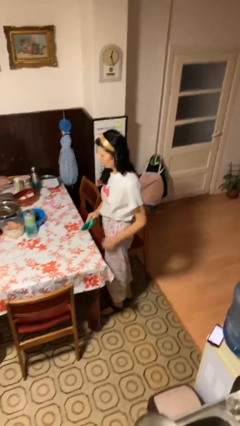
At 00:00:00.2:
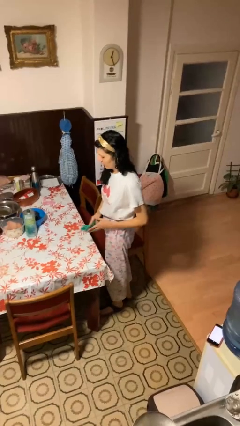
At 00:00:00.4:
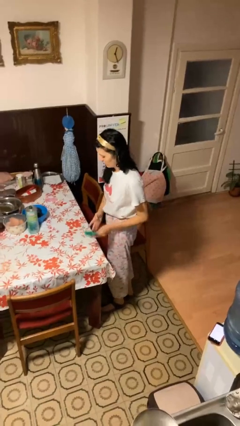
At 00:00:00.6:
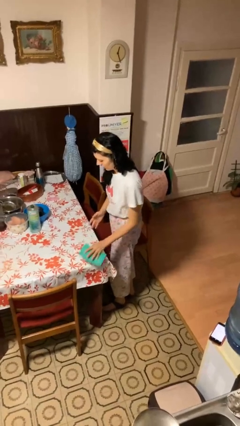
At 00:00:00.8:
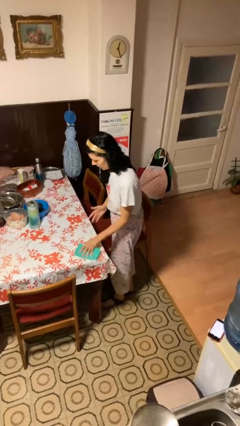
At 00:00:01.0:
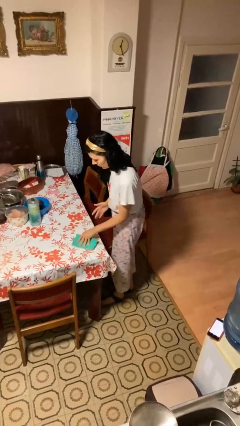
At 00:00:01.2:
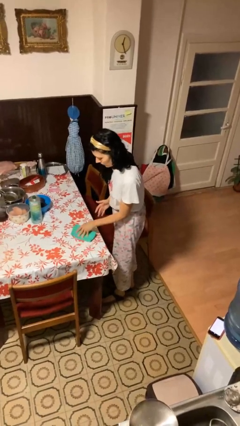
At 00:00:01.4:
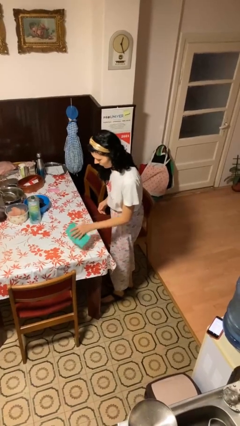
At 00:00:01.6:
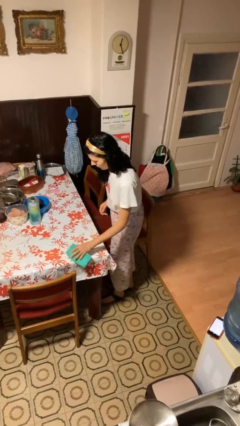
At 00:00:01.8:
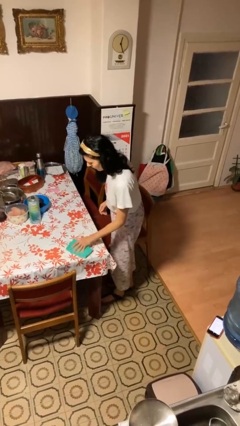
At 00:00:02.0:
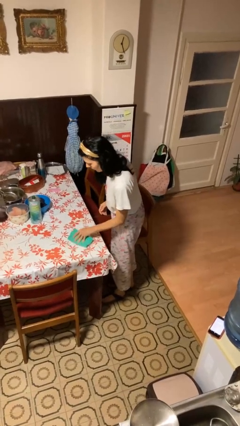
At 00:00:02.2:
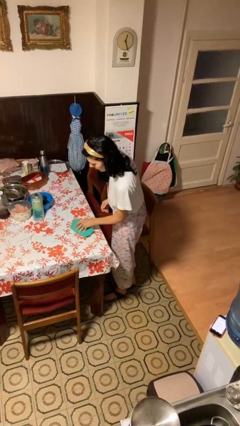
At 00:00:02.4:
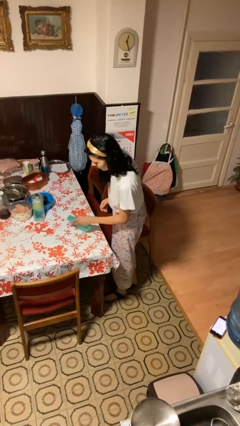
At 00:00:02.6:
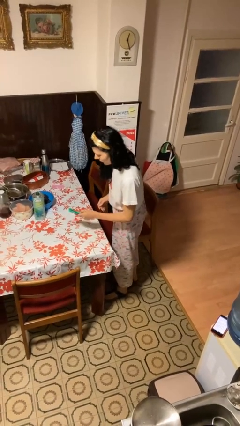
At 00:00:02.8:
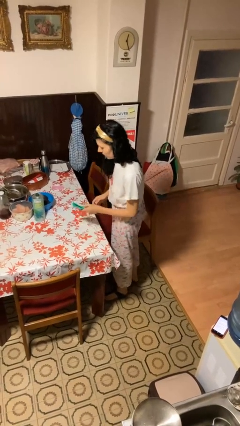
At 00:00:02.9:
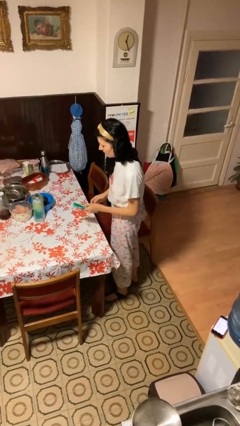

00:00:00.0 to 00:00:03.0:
person cleans table with rag

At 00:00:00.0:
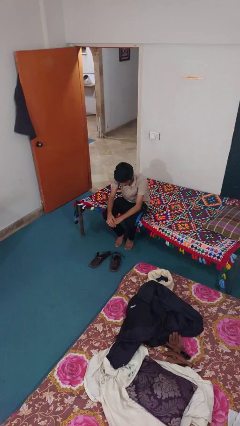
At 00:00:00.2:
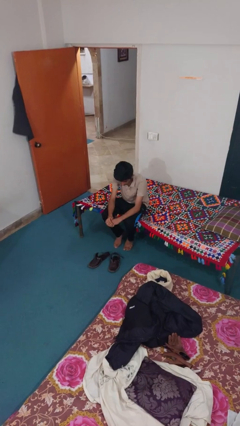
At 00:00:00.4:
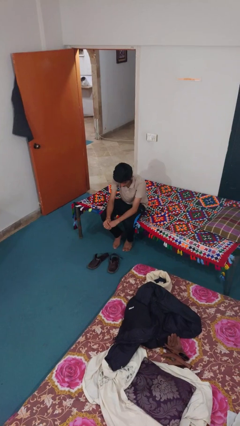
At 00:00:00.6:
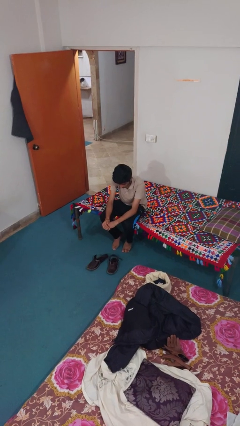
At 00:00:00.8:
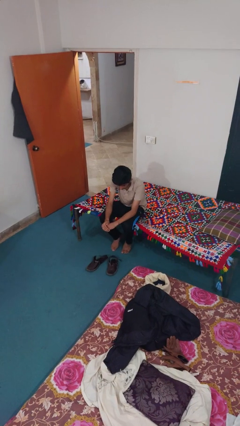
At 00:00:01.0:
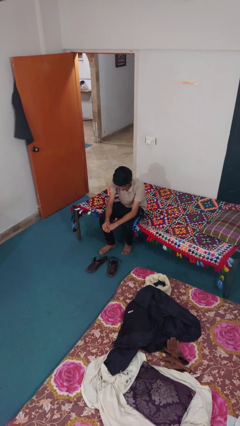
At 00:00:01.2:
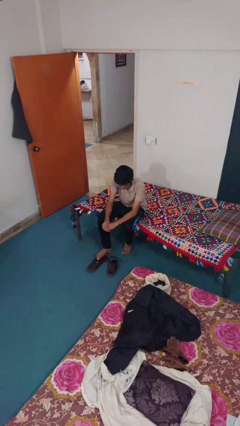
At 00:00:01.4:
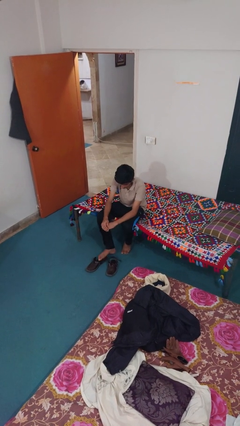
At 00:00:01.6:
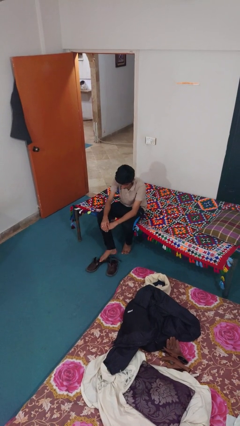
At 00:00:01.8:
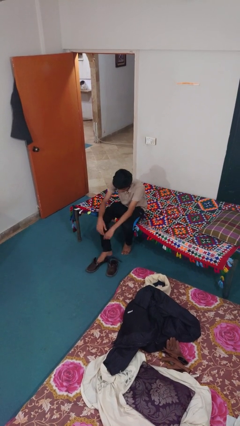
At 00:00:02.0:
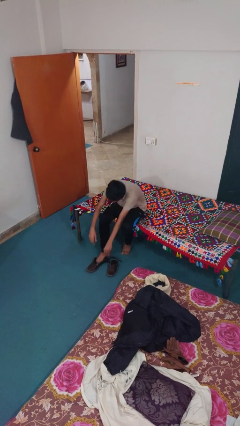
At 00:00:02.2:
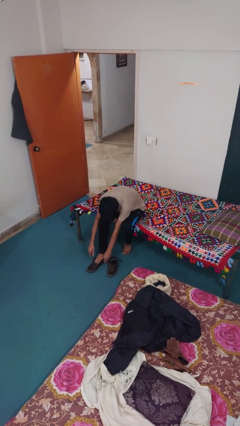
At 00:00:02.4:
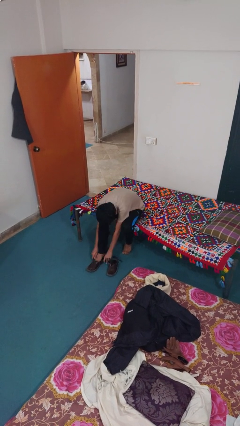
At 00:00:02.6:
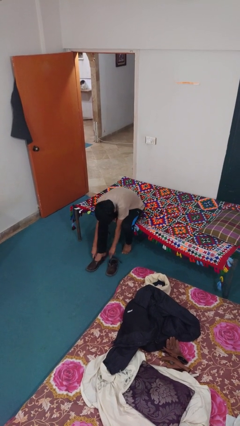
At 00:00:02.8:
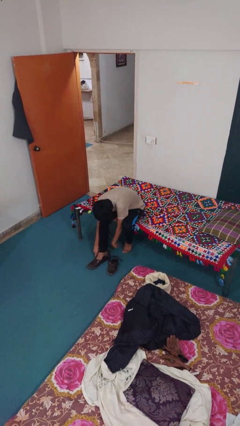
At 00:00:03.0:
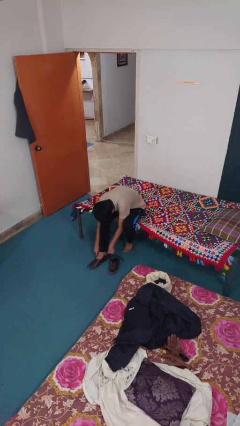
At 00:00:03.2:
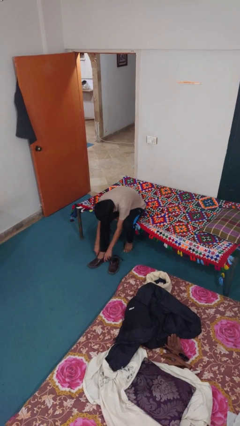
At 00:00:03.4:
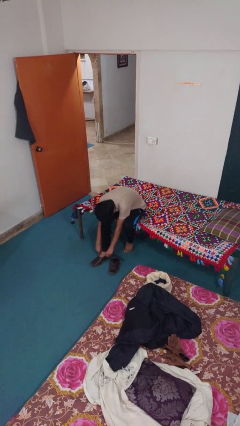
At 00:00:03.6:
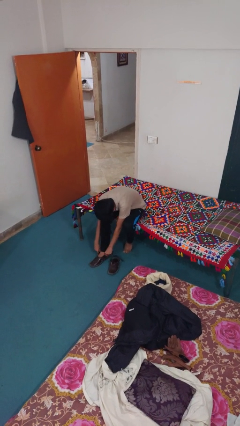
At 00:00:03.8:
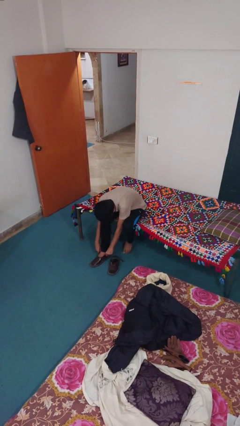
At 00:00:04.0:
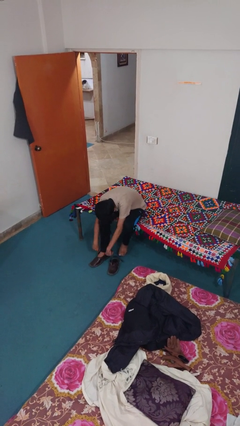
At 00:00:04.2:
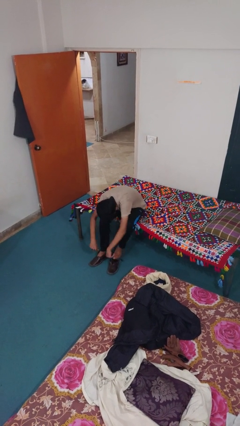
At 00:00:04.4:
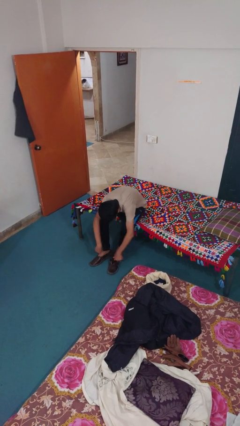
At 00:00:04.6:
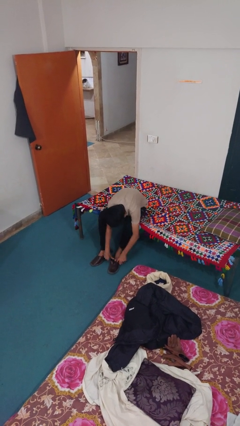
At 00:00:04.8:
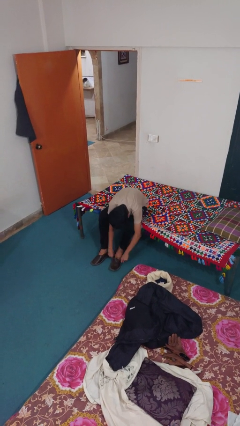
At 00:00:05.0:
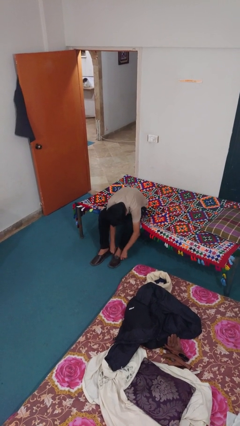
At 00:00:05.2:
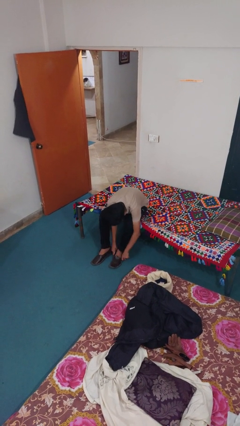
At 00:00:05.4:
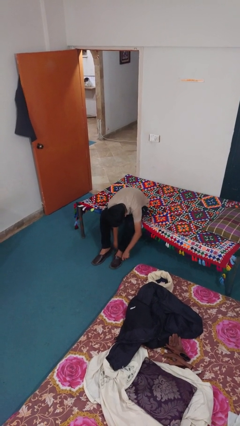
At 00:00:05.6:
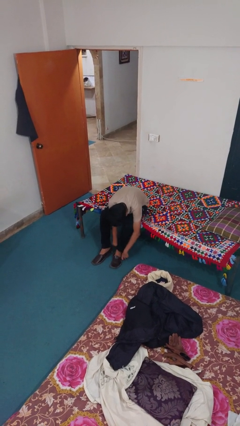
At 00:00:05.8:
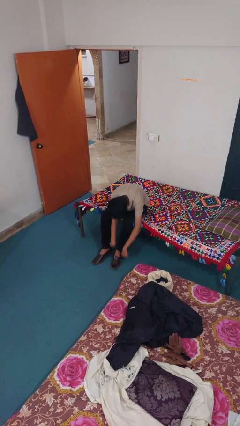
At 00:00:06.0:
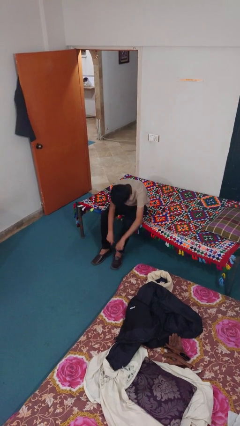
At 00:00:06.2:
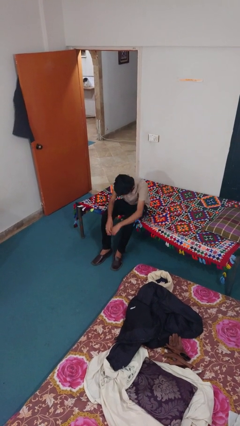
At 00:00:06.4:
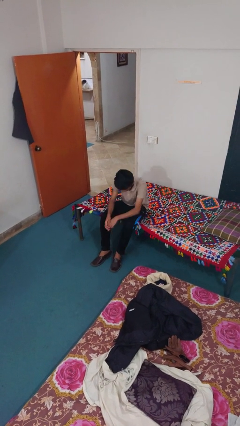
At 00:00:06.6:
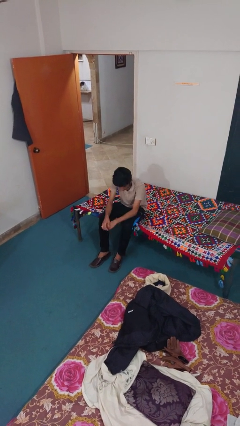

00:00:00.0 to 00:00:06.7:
person puts on shoes

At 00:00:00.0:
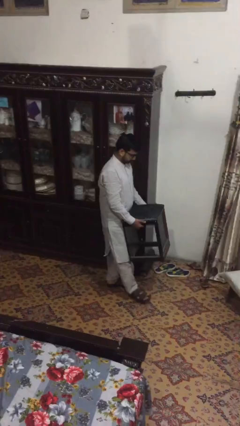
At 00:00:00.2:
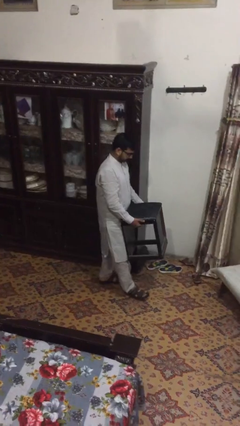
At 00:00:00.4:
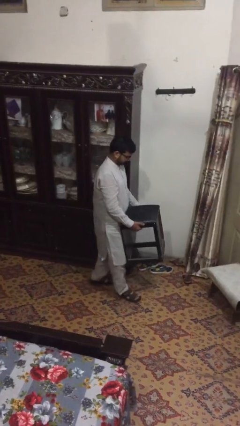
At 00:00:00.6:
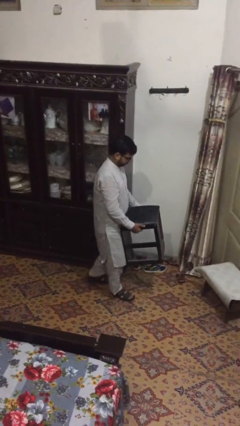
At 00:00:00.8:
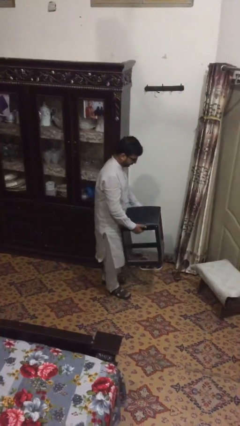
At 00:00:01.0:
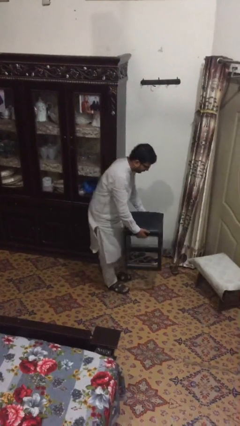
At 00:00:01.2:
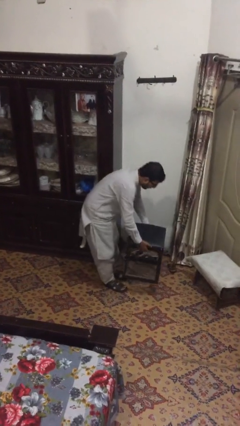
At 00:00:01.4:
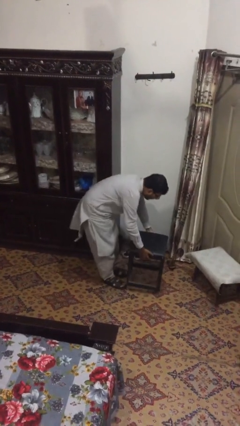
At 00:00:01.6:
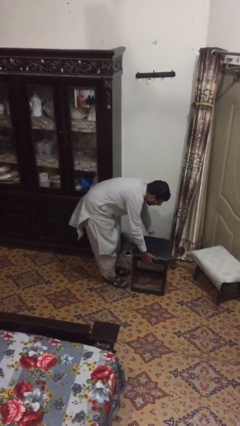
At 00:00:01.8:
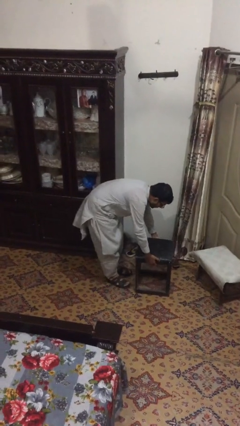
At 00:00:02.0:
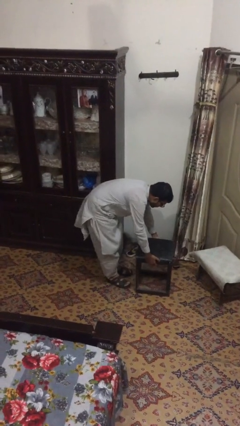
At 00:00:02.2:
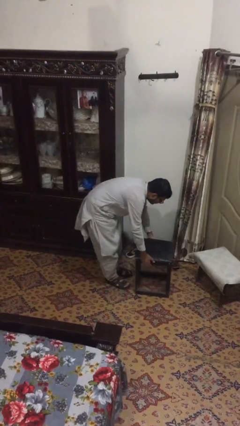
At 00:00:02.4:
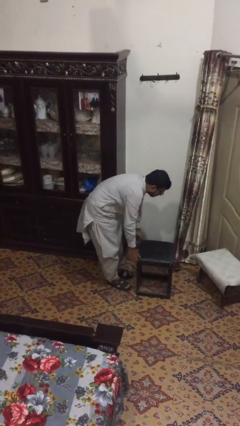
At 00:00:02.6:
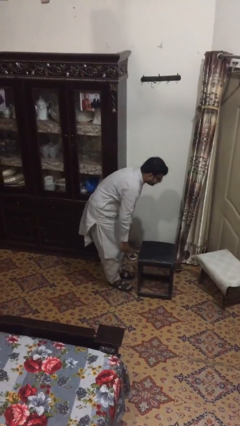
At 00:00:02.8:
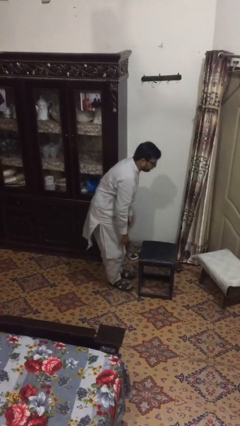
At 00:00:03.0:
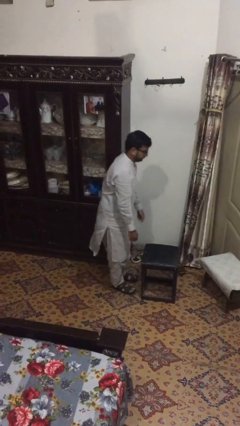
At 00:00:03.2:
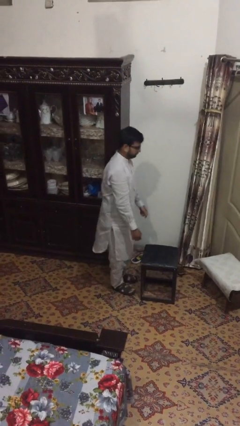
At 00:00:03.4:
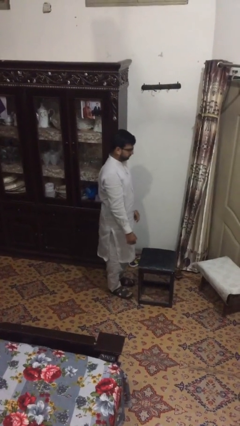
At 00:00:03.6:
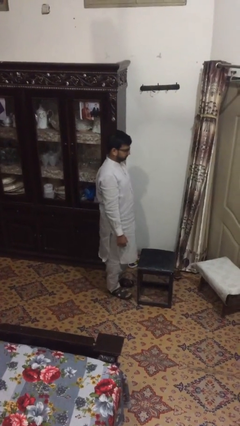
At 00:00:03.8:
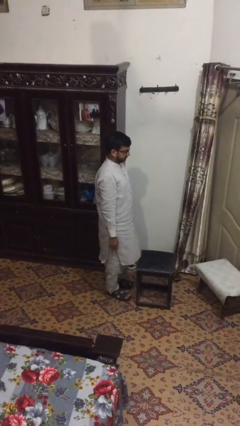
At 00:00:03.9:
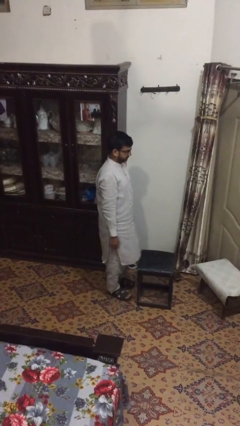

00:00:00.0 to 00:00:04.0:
person puts down object on floor

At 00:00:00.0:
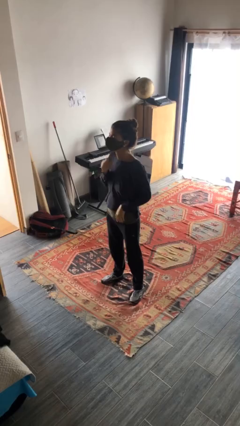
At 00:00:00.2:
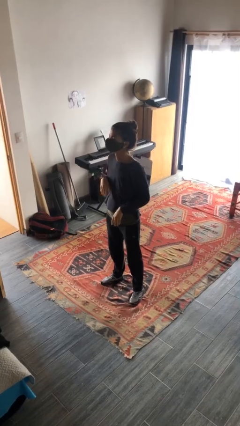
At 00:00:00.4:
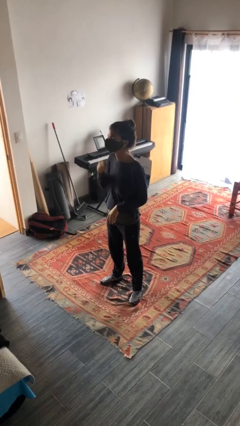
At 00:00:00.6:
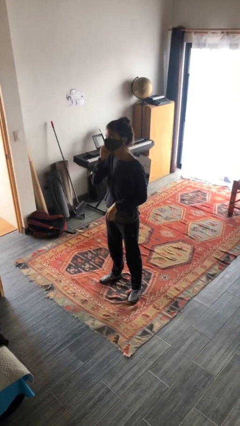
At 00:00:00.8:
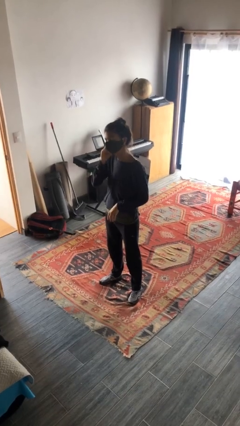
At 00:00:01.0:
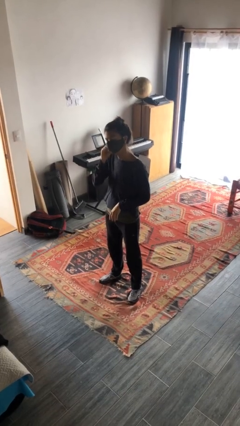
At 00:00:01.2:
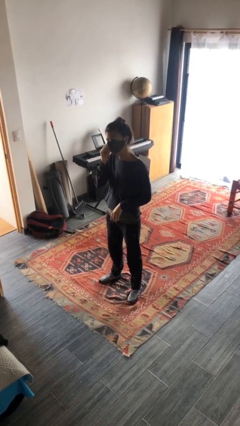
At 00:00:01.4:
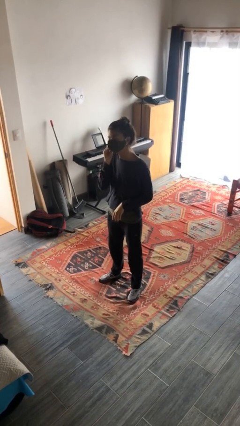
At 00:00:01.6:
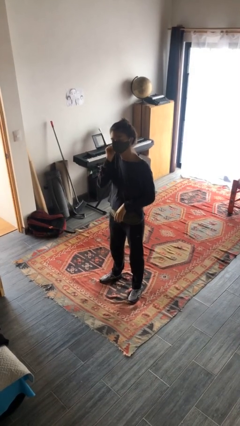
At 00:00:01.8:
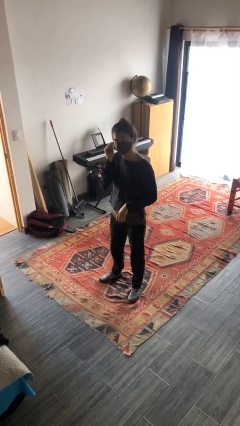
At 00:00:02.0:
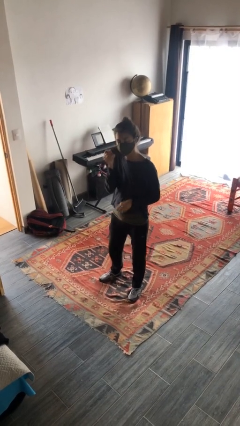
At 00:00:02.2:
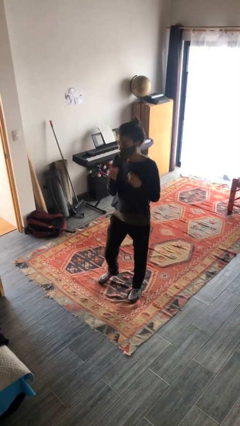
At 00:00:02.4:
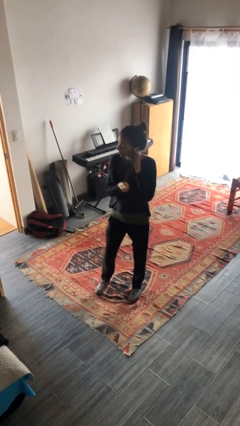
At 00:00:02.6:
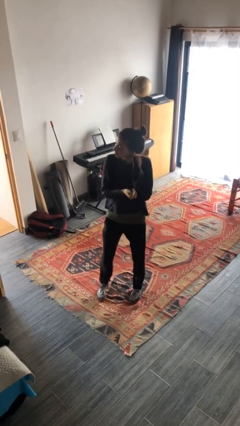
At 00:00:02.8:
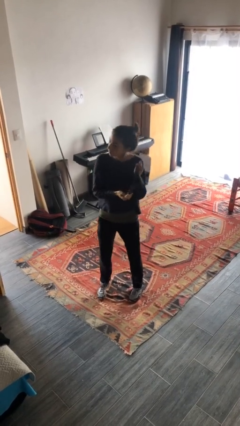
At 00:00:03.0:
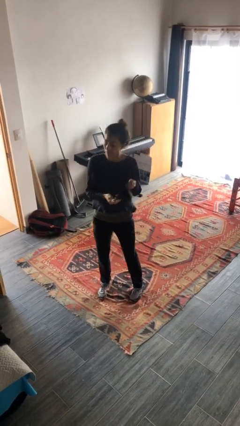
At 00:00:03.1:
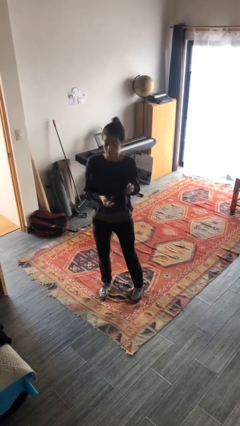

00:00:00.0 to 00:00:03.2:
person takes off facemask

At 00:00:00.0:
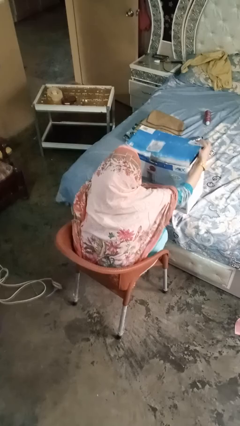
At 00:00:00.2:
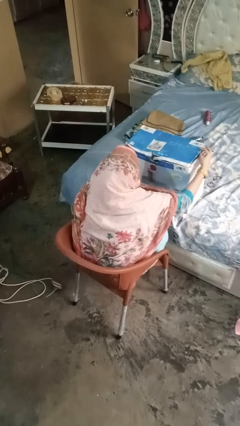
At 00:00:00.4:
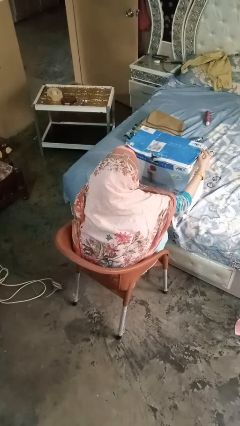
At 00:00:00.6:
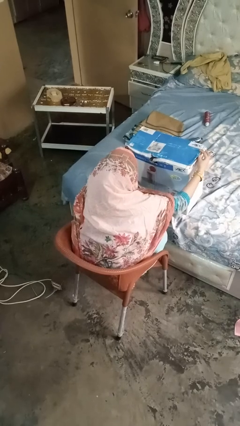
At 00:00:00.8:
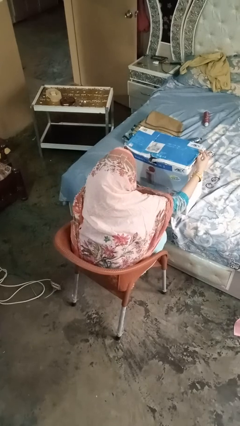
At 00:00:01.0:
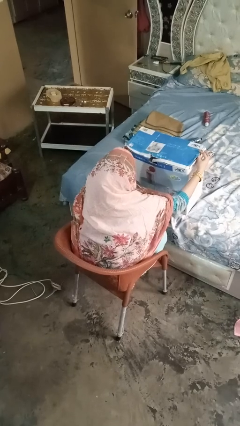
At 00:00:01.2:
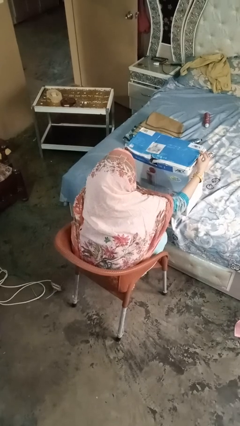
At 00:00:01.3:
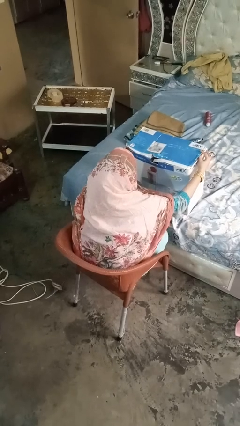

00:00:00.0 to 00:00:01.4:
person closes box
